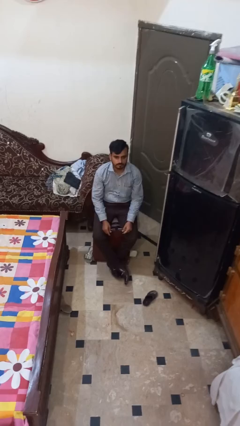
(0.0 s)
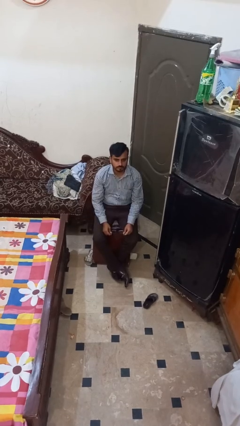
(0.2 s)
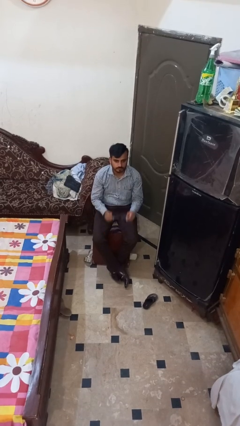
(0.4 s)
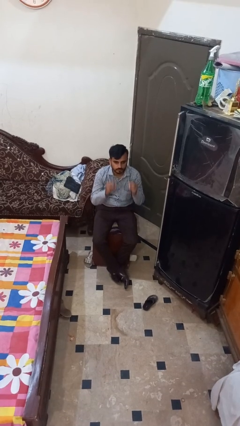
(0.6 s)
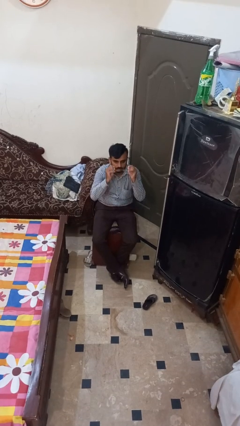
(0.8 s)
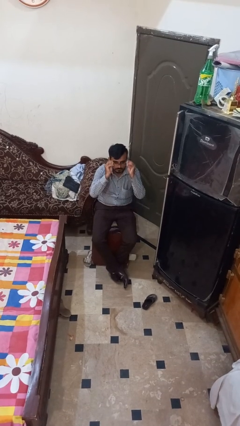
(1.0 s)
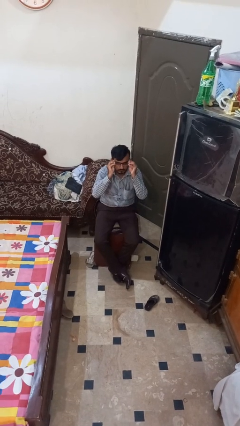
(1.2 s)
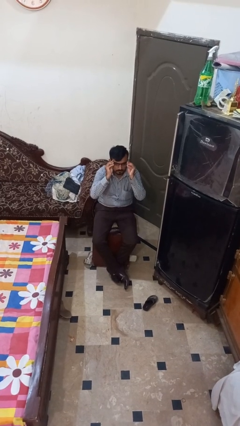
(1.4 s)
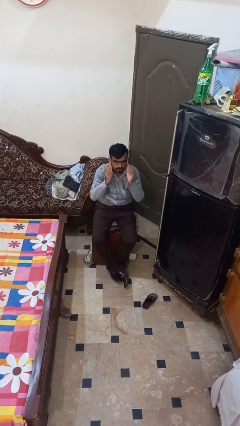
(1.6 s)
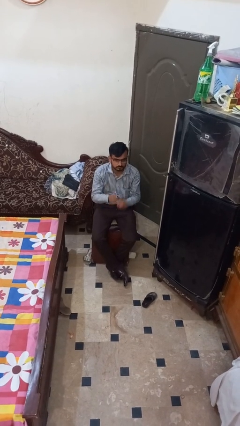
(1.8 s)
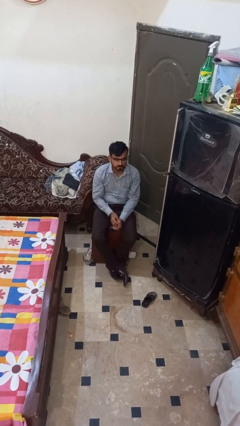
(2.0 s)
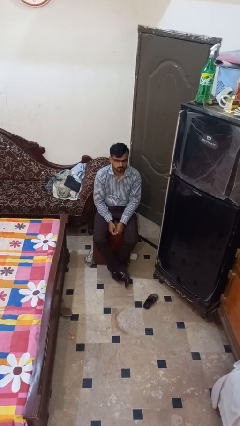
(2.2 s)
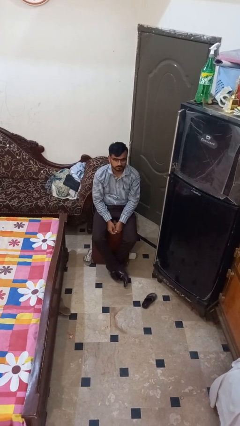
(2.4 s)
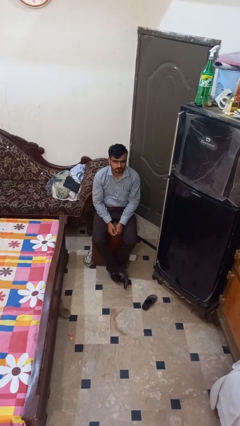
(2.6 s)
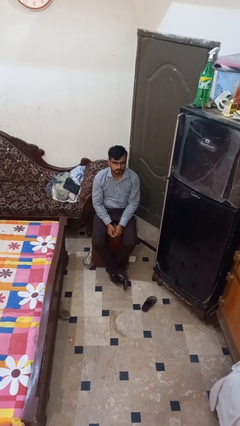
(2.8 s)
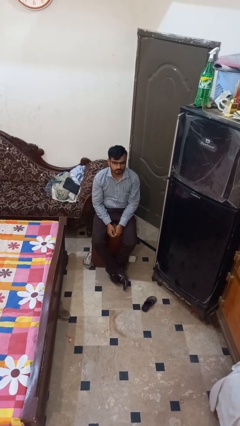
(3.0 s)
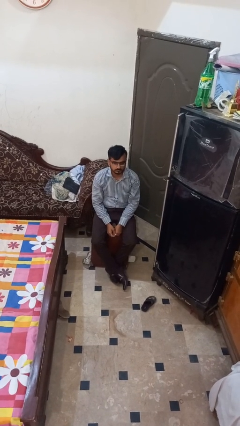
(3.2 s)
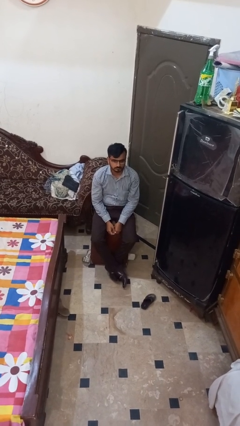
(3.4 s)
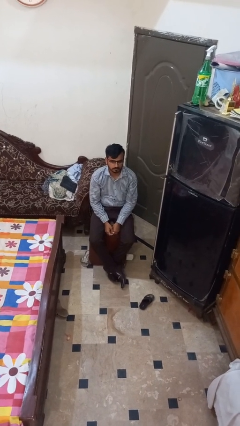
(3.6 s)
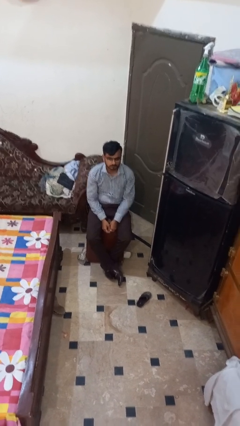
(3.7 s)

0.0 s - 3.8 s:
person puts on glasses

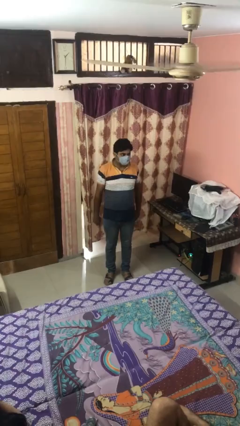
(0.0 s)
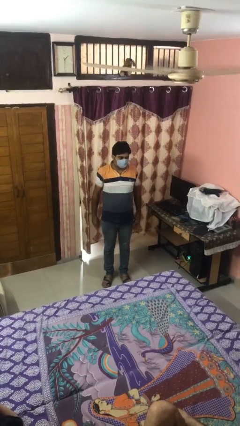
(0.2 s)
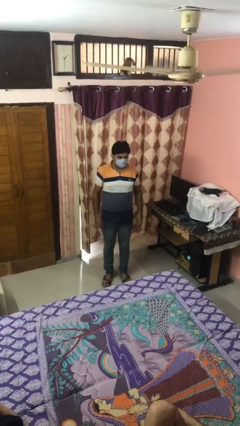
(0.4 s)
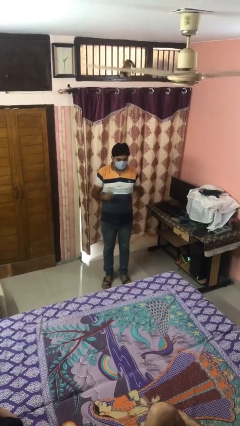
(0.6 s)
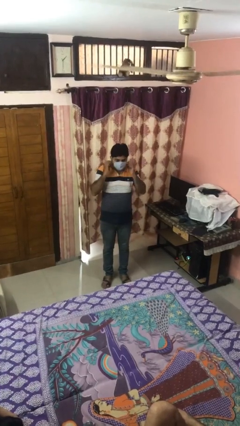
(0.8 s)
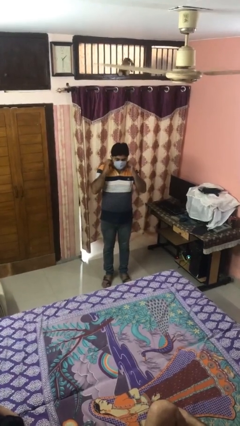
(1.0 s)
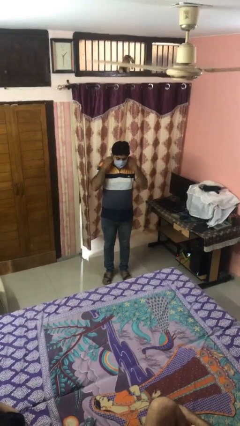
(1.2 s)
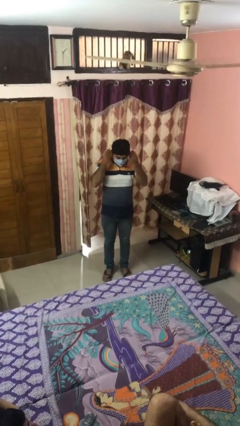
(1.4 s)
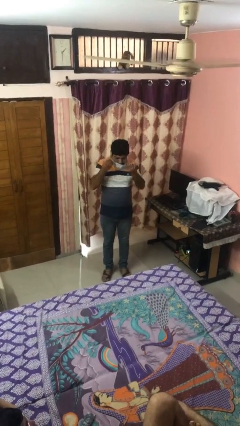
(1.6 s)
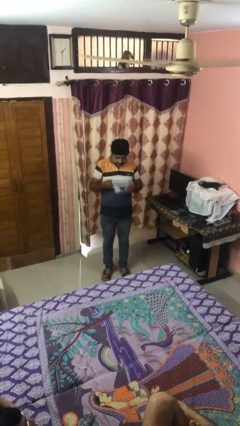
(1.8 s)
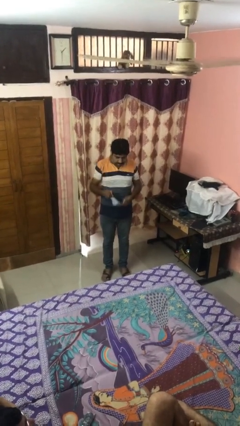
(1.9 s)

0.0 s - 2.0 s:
person takes off facemask

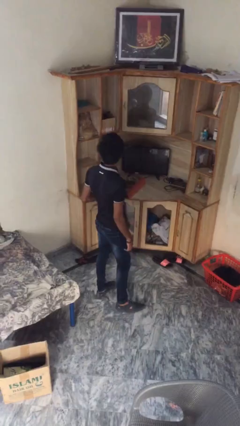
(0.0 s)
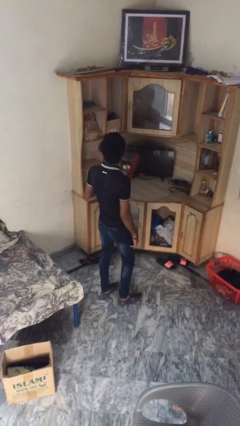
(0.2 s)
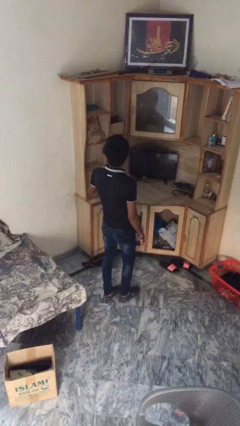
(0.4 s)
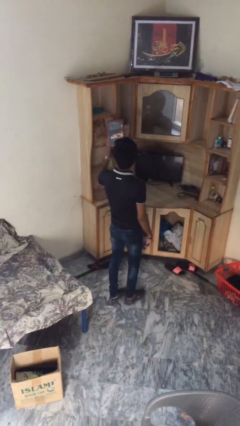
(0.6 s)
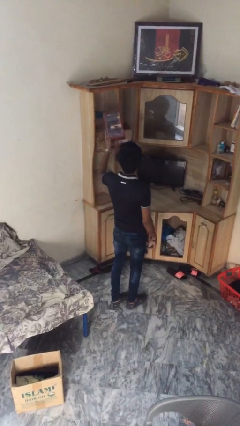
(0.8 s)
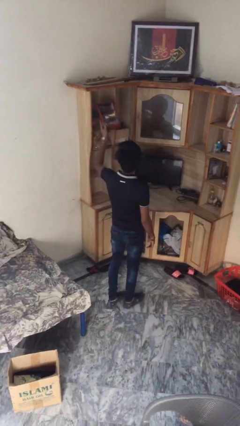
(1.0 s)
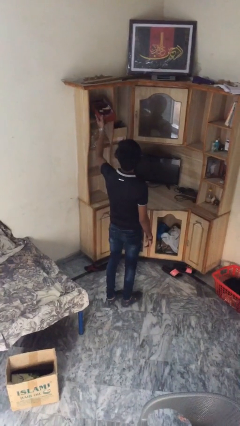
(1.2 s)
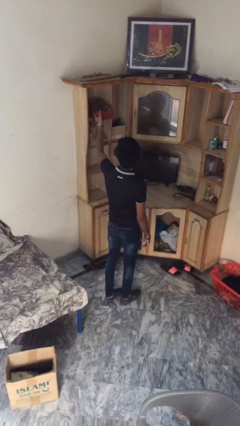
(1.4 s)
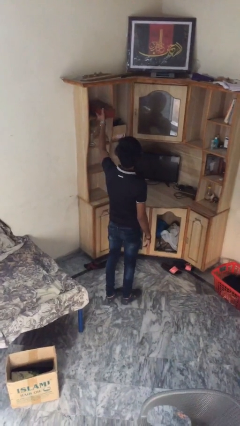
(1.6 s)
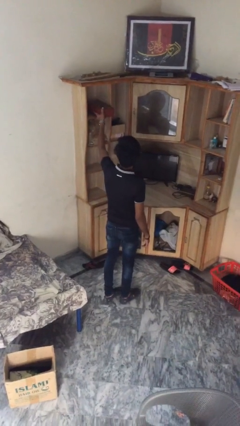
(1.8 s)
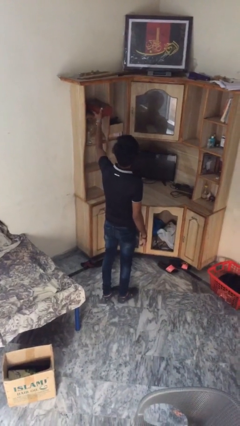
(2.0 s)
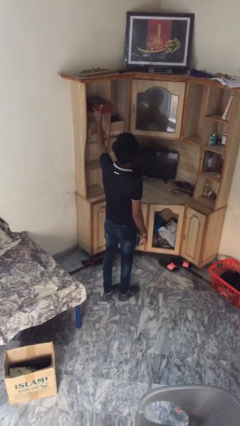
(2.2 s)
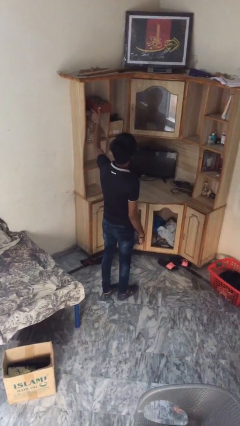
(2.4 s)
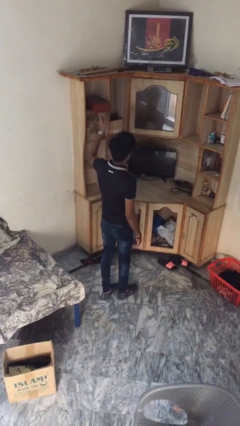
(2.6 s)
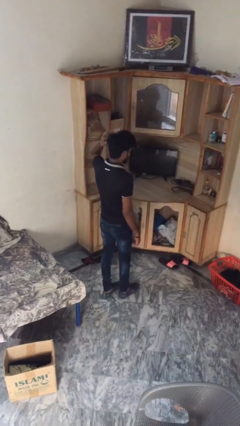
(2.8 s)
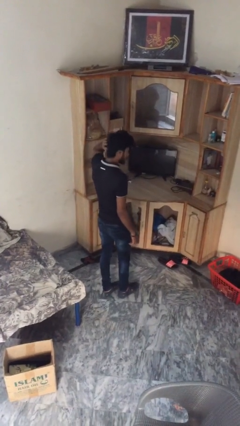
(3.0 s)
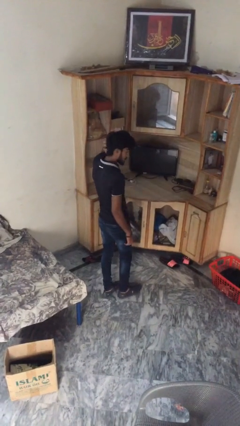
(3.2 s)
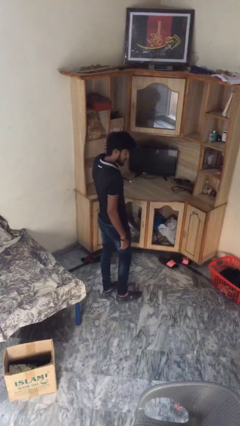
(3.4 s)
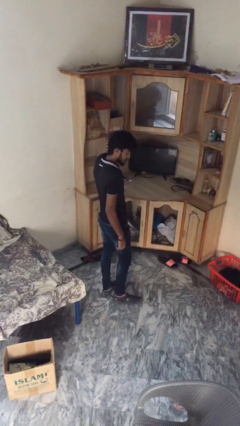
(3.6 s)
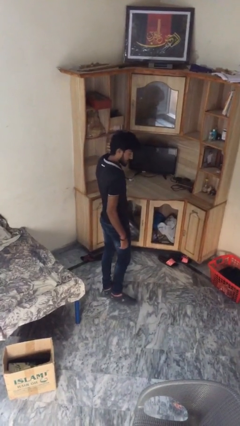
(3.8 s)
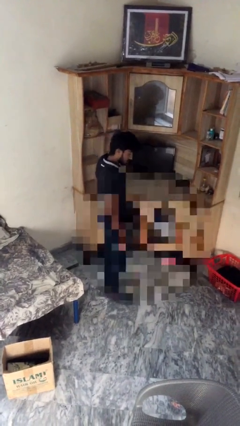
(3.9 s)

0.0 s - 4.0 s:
person puts down object on shelf

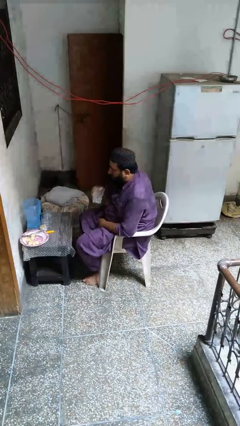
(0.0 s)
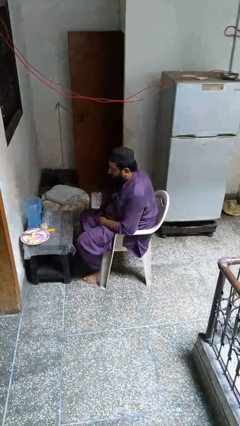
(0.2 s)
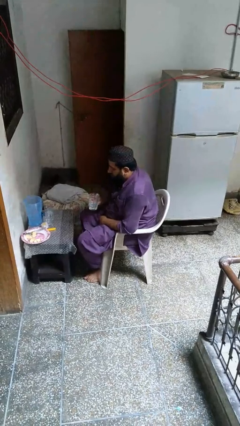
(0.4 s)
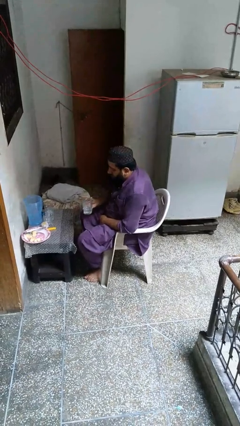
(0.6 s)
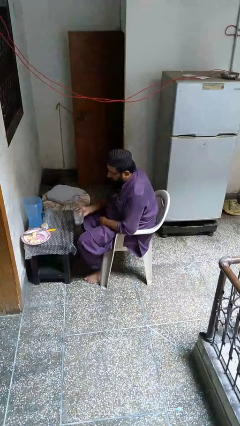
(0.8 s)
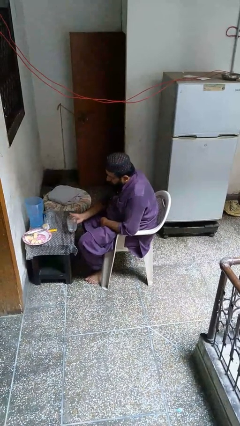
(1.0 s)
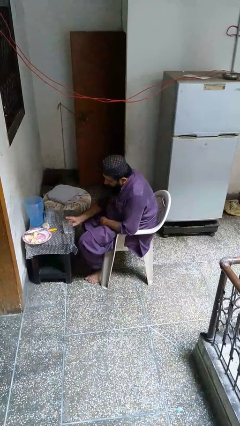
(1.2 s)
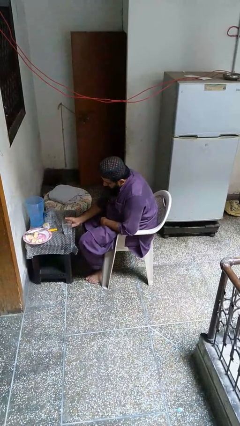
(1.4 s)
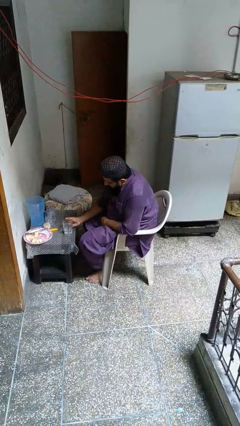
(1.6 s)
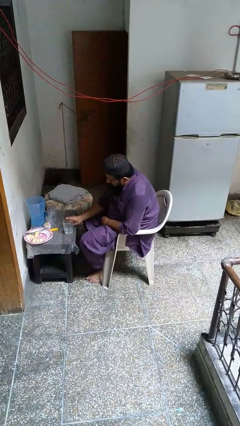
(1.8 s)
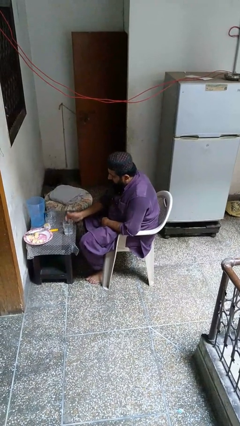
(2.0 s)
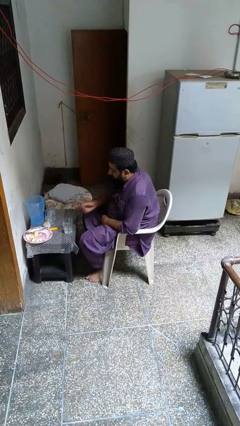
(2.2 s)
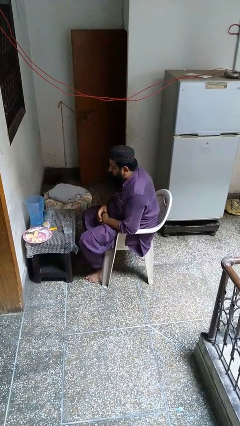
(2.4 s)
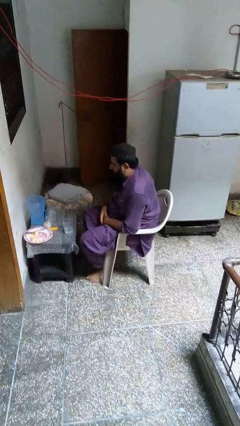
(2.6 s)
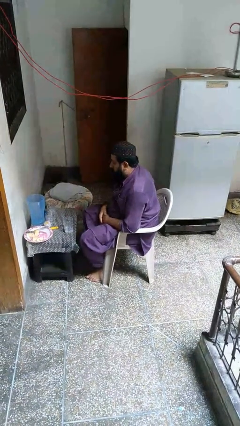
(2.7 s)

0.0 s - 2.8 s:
person puts down object on table

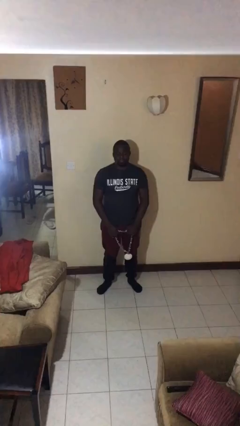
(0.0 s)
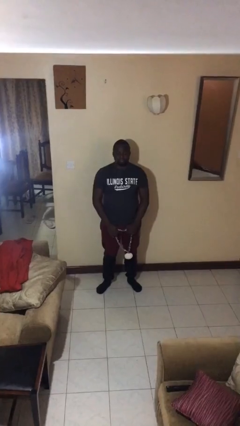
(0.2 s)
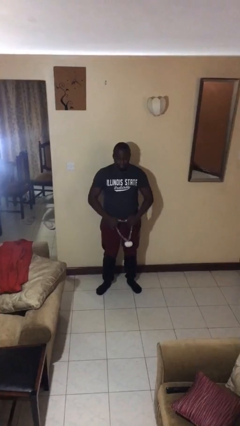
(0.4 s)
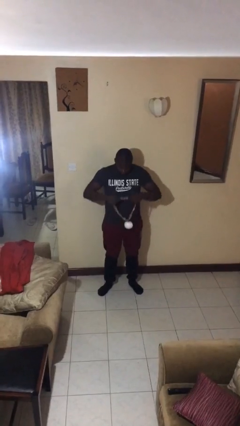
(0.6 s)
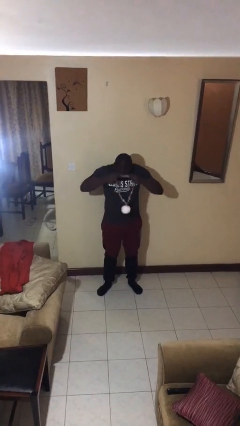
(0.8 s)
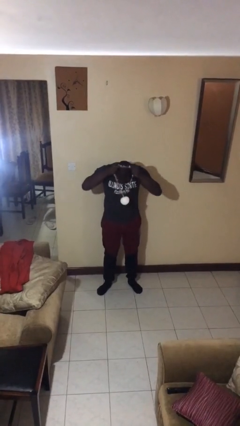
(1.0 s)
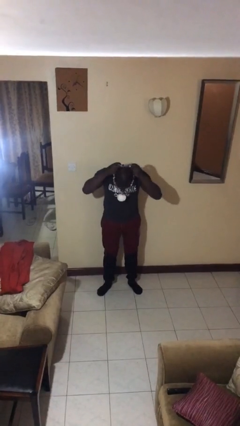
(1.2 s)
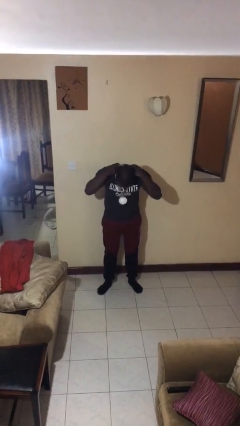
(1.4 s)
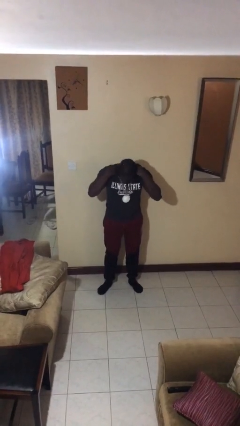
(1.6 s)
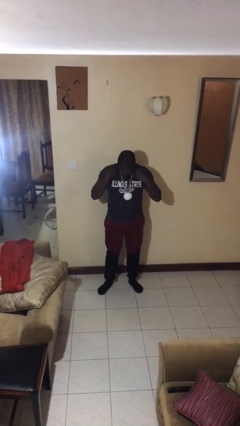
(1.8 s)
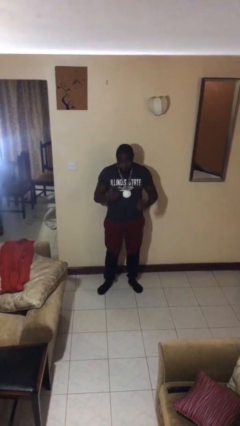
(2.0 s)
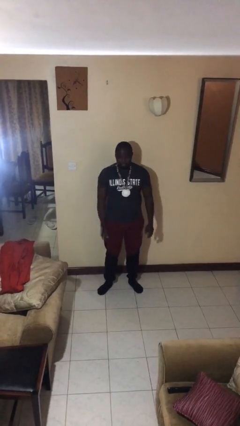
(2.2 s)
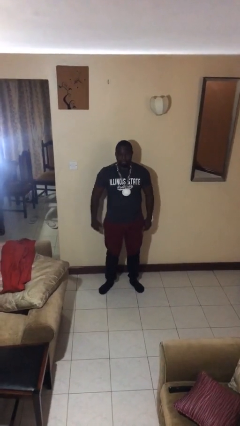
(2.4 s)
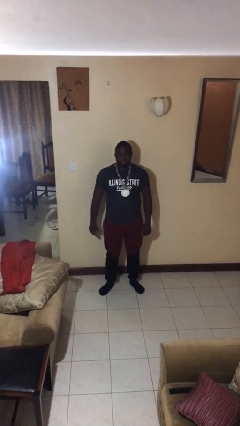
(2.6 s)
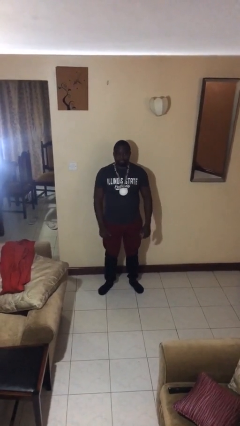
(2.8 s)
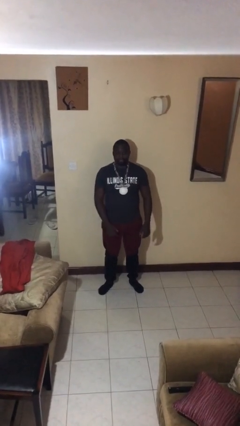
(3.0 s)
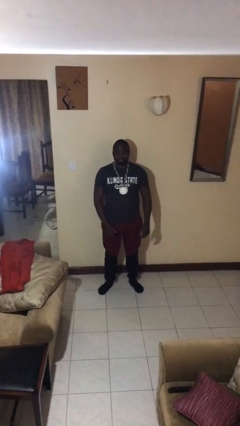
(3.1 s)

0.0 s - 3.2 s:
person puts on necklace

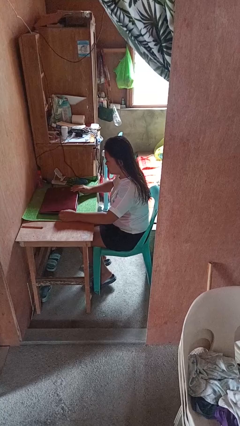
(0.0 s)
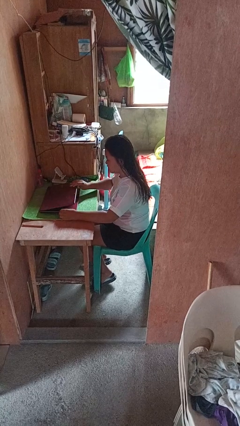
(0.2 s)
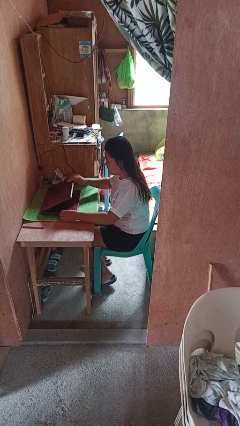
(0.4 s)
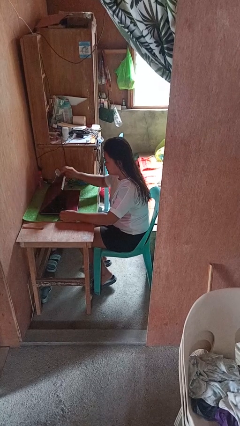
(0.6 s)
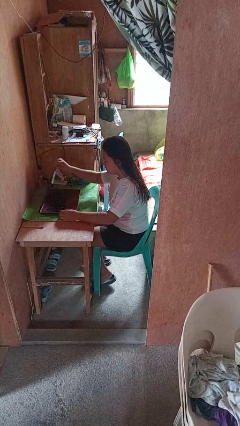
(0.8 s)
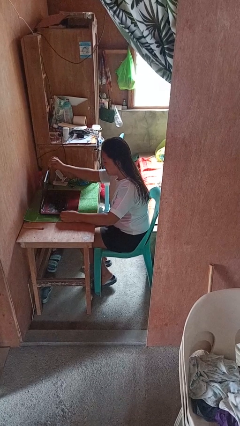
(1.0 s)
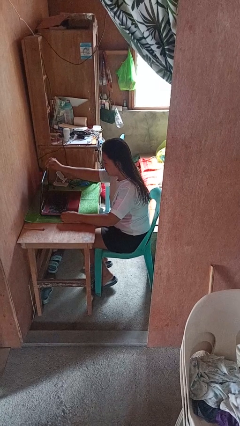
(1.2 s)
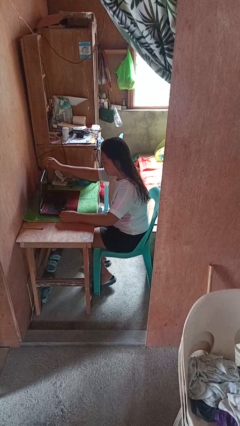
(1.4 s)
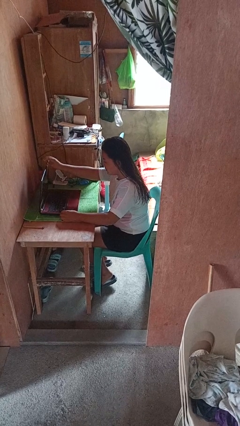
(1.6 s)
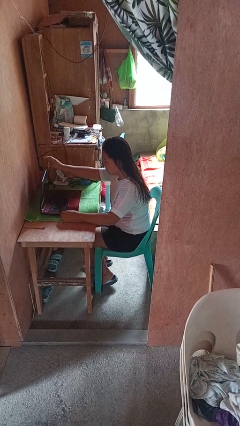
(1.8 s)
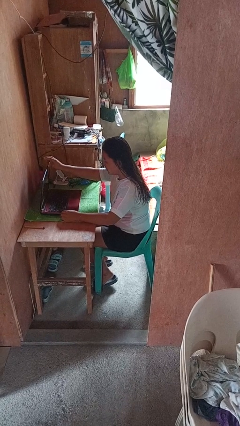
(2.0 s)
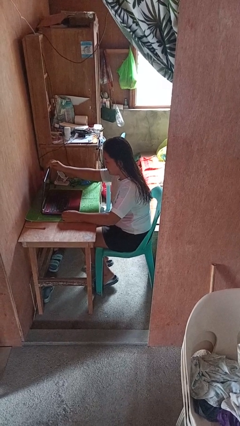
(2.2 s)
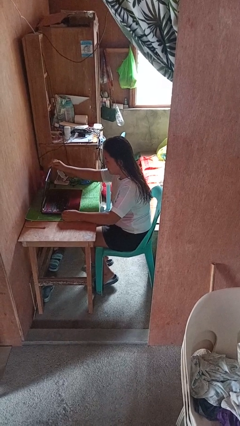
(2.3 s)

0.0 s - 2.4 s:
person opens laptop
